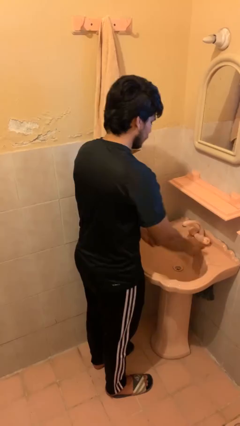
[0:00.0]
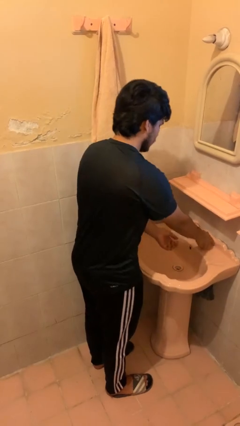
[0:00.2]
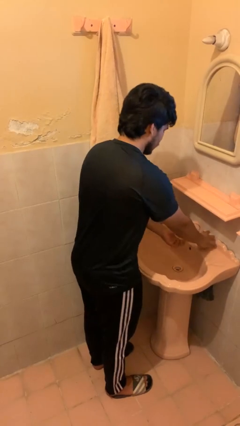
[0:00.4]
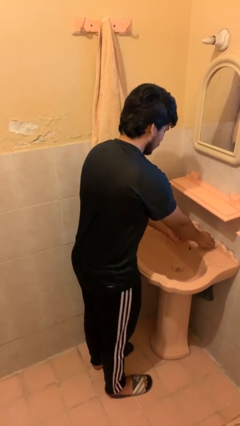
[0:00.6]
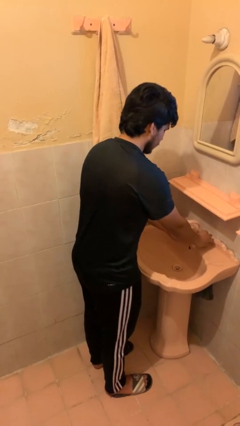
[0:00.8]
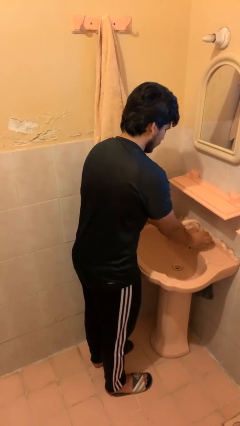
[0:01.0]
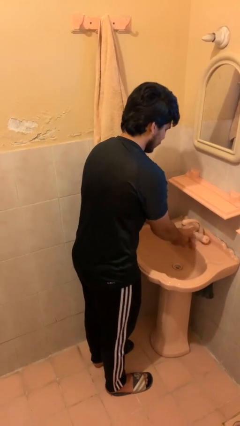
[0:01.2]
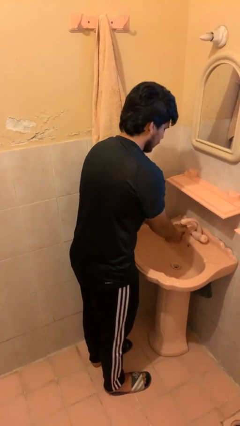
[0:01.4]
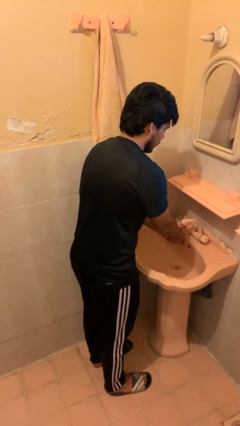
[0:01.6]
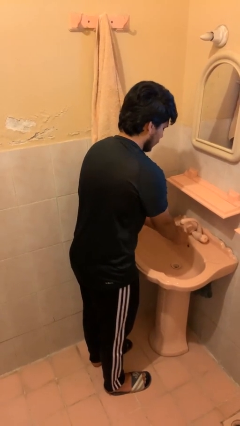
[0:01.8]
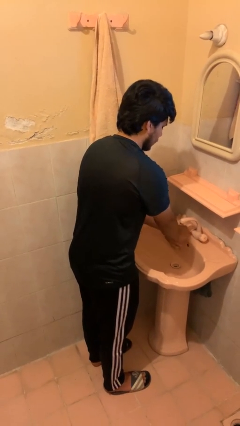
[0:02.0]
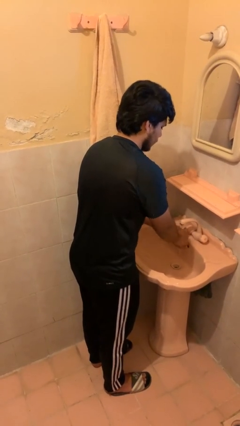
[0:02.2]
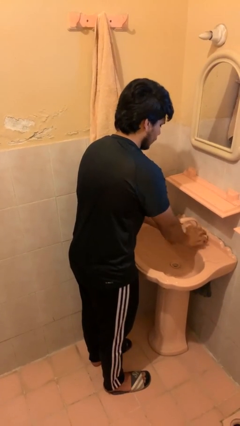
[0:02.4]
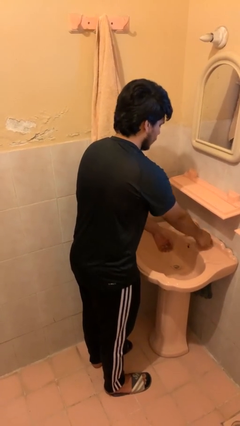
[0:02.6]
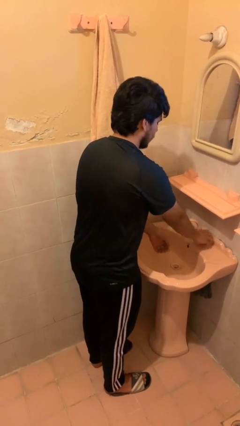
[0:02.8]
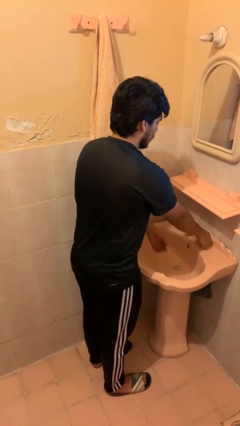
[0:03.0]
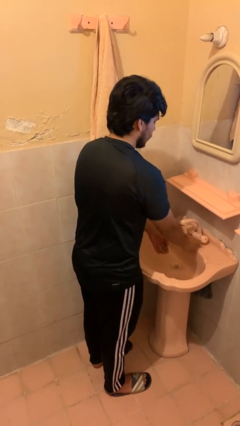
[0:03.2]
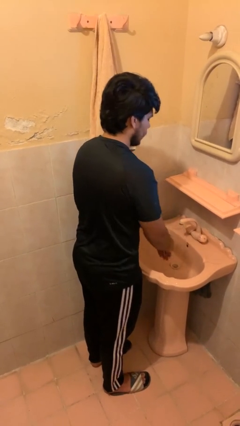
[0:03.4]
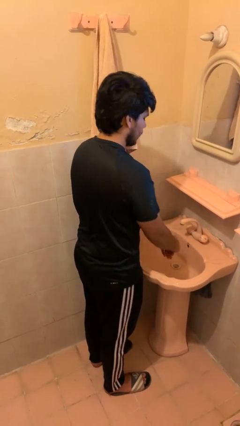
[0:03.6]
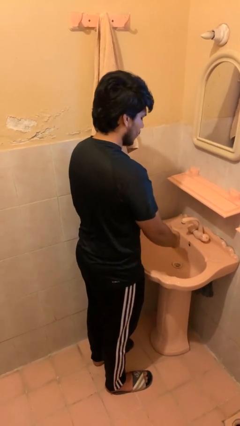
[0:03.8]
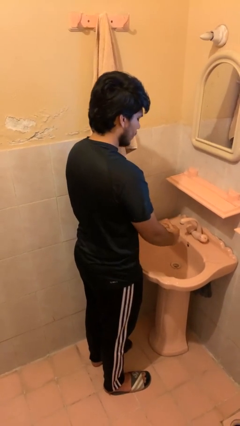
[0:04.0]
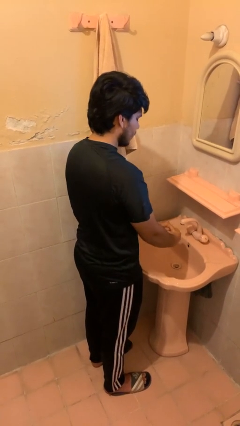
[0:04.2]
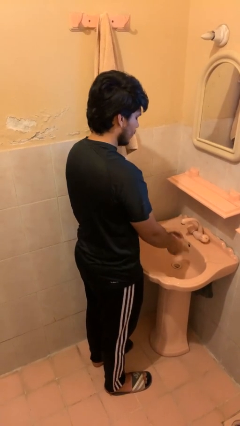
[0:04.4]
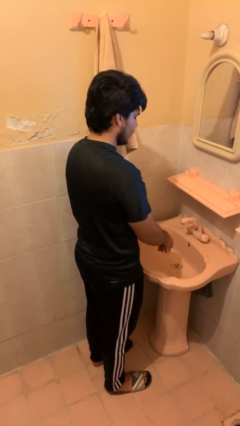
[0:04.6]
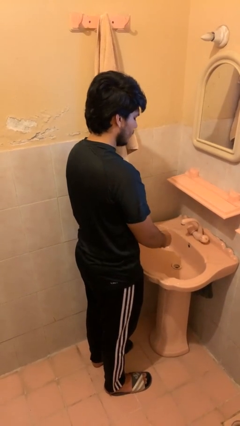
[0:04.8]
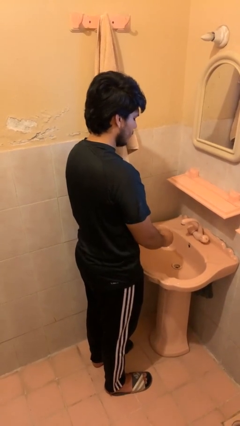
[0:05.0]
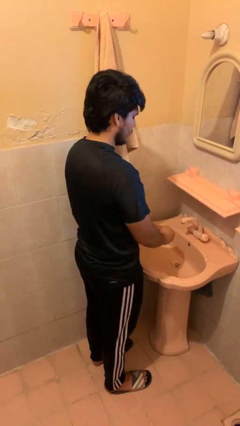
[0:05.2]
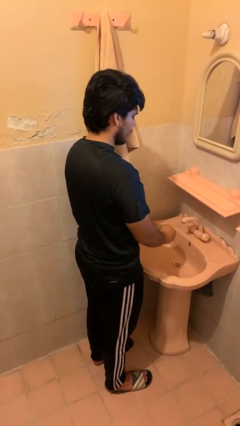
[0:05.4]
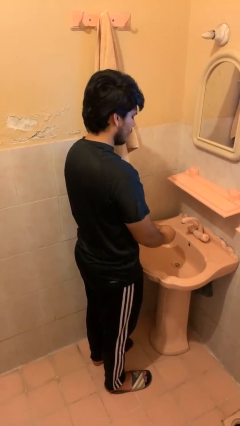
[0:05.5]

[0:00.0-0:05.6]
person washes hands

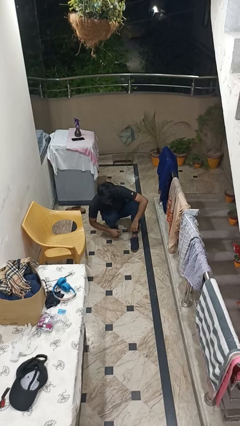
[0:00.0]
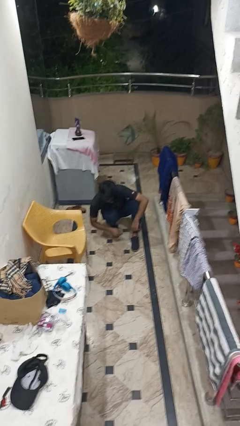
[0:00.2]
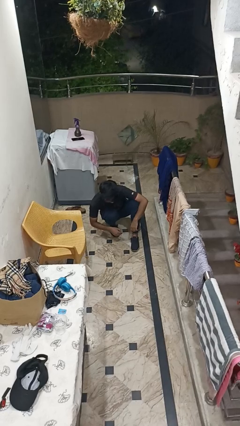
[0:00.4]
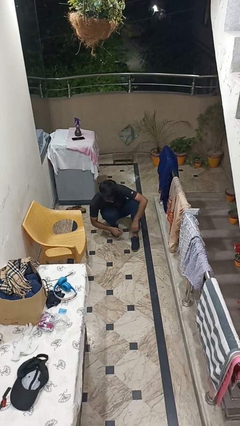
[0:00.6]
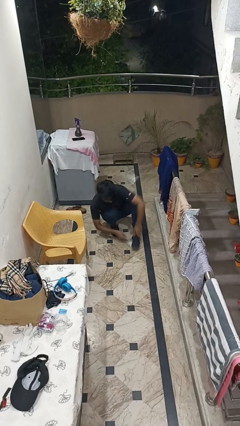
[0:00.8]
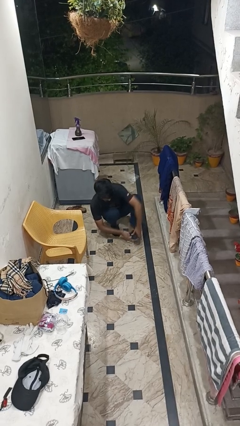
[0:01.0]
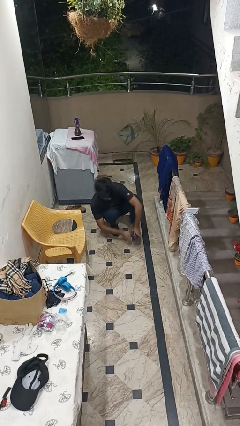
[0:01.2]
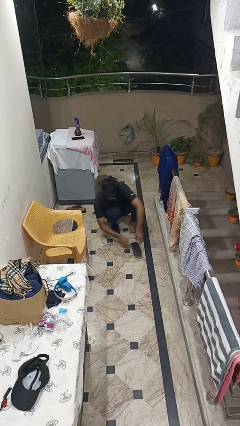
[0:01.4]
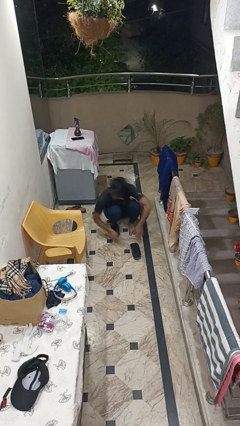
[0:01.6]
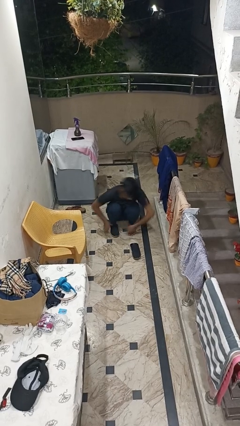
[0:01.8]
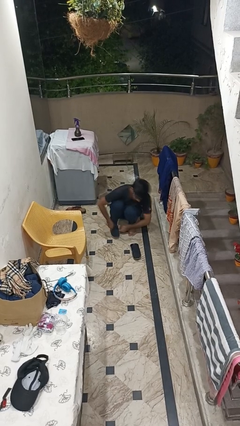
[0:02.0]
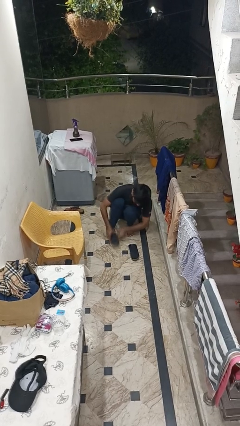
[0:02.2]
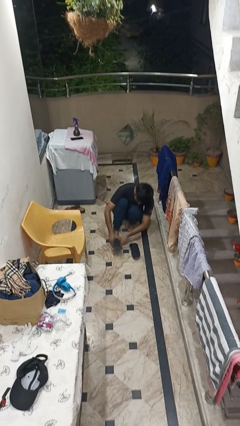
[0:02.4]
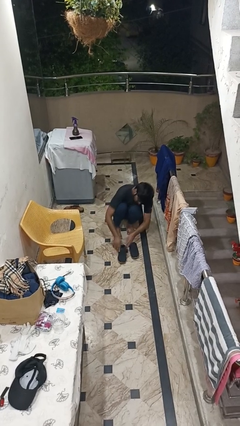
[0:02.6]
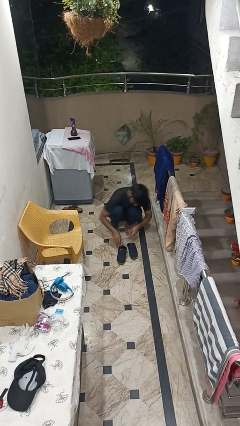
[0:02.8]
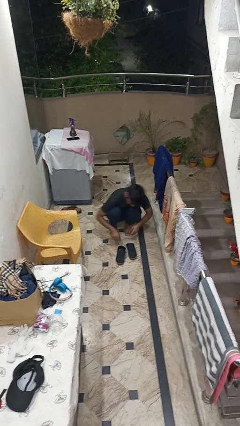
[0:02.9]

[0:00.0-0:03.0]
person takes off shoes

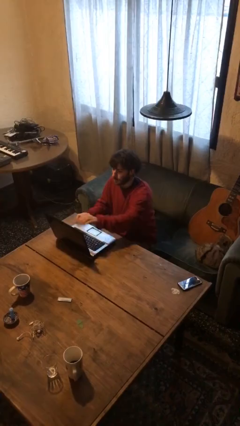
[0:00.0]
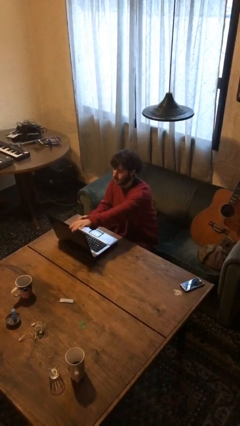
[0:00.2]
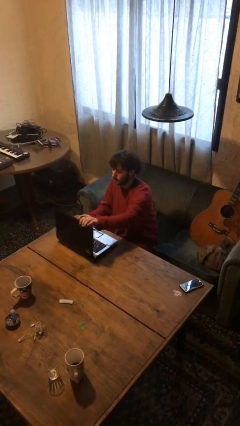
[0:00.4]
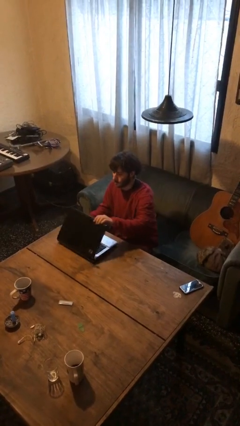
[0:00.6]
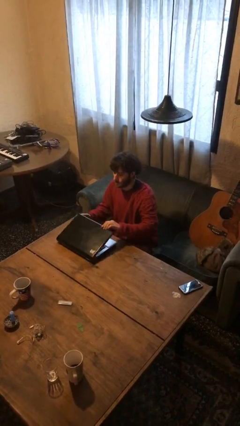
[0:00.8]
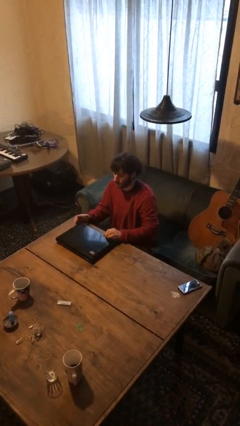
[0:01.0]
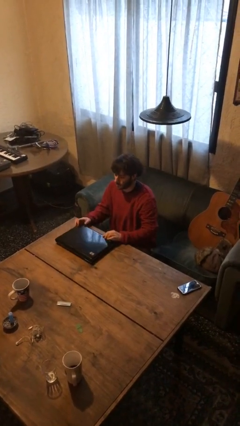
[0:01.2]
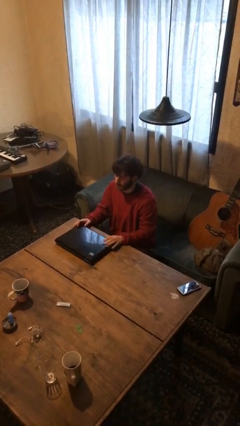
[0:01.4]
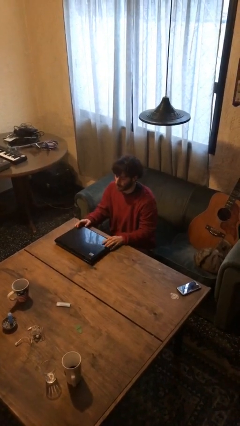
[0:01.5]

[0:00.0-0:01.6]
person closes laptop

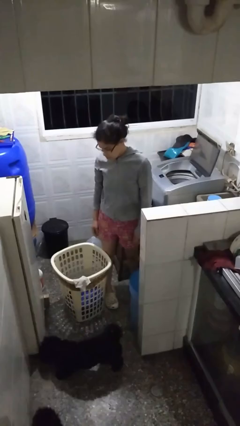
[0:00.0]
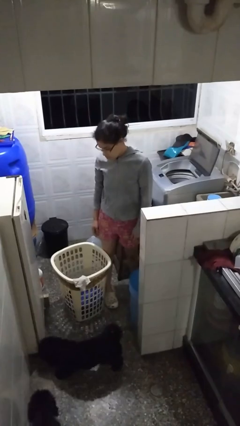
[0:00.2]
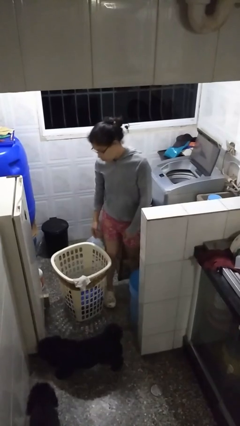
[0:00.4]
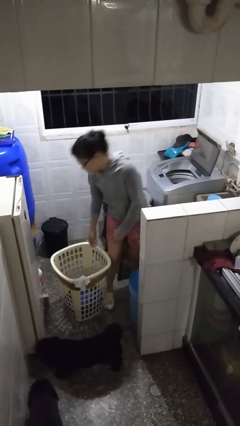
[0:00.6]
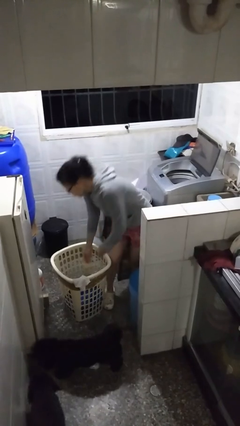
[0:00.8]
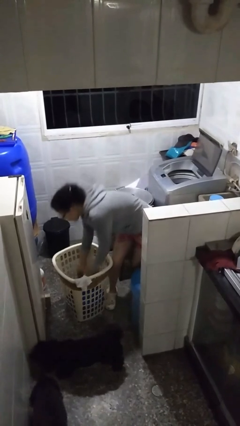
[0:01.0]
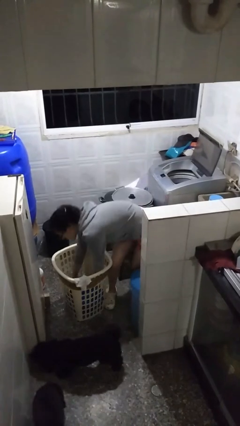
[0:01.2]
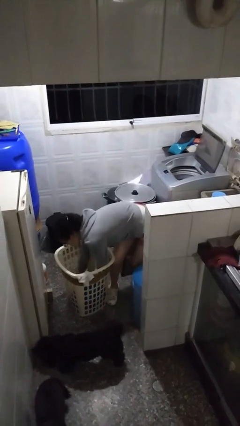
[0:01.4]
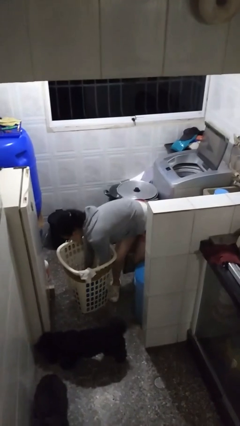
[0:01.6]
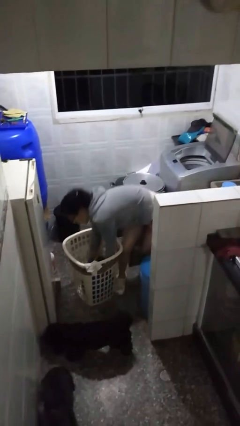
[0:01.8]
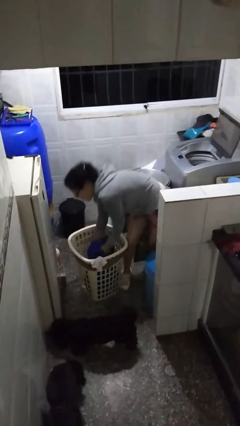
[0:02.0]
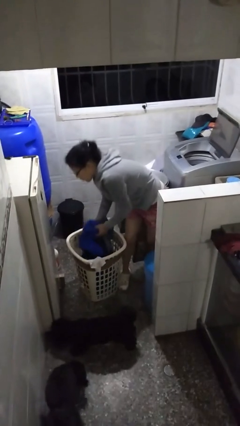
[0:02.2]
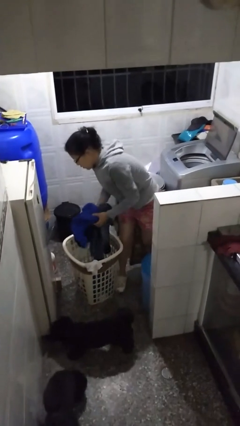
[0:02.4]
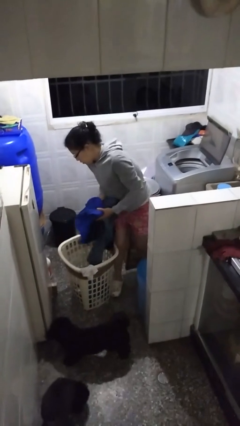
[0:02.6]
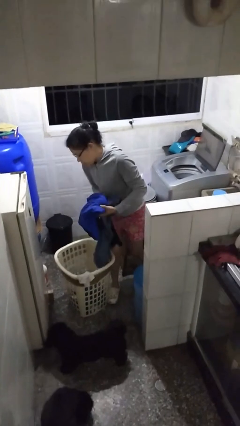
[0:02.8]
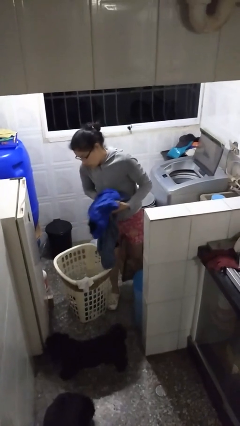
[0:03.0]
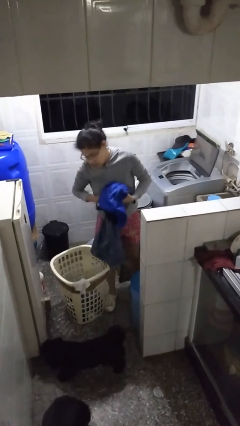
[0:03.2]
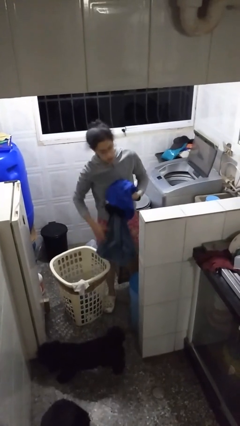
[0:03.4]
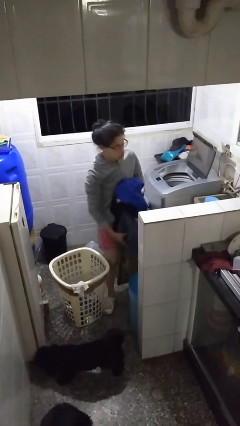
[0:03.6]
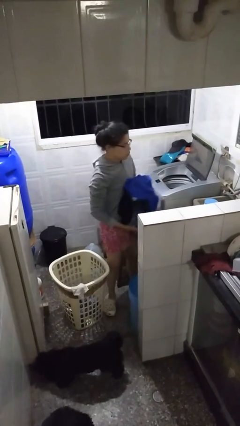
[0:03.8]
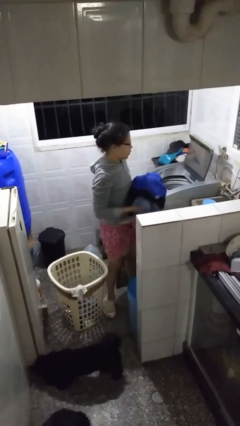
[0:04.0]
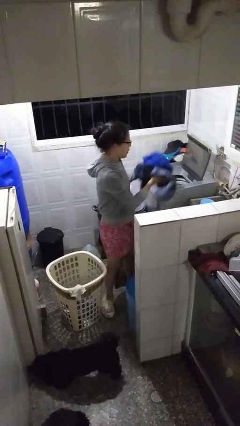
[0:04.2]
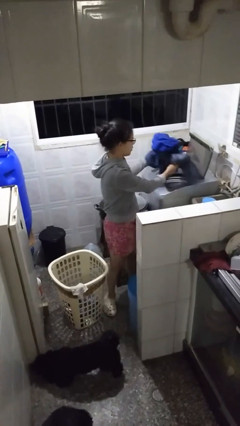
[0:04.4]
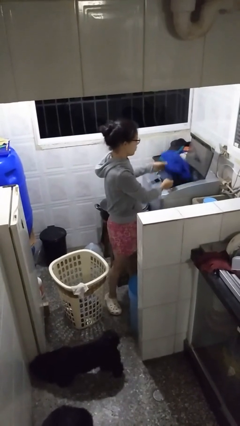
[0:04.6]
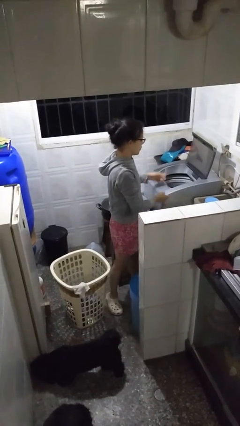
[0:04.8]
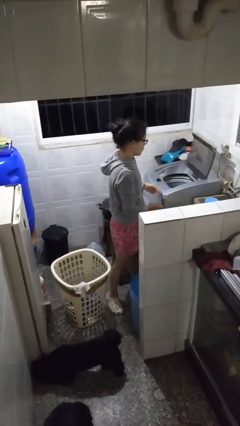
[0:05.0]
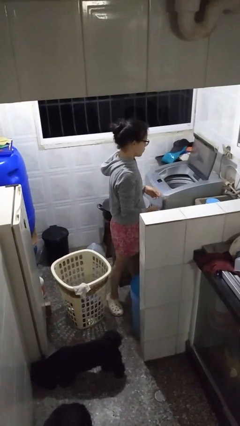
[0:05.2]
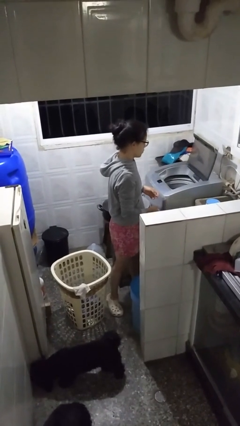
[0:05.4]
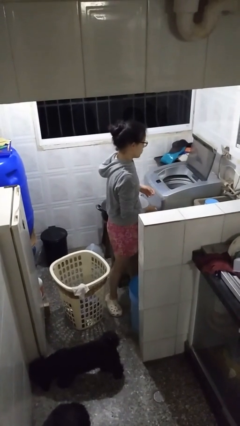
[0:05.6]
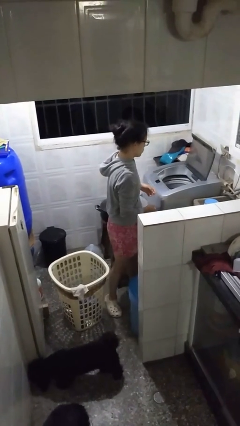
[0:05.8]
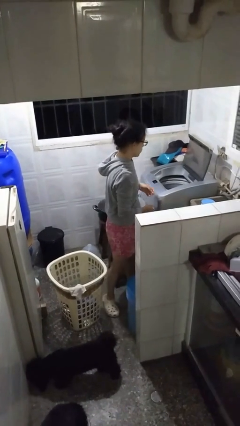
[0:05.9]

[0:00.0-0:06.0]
person loads clotheswasher

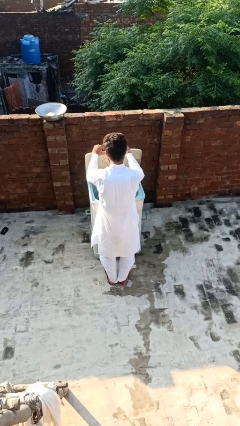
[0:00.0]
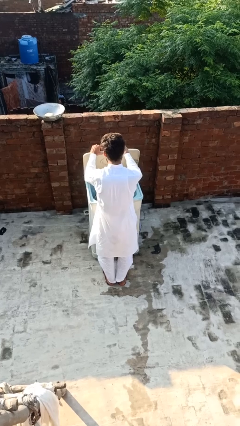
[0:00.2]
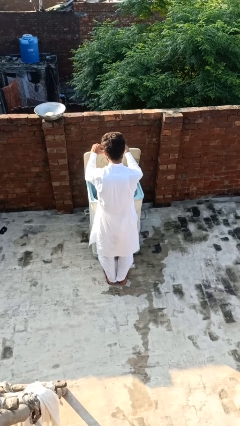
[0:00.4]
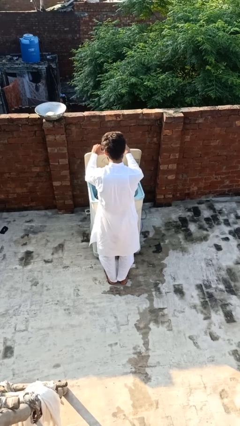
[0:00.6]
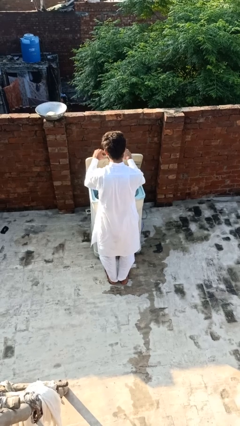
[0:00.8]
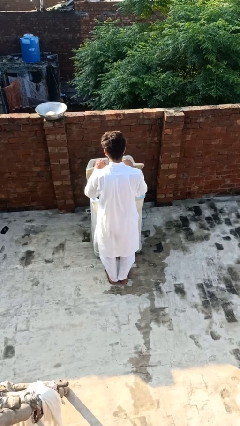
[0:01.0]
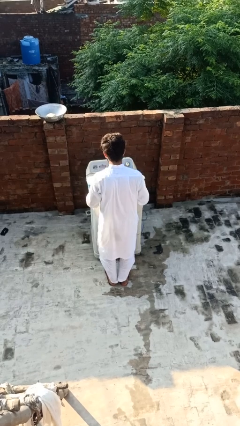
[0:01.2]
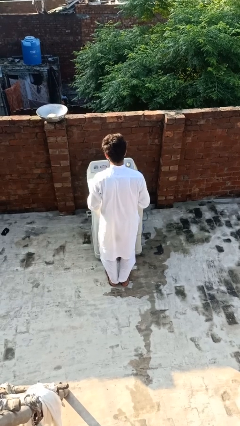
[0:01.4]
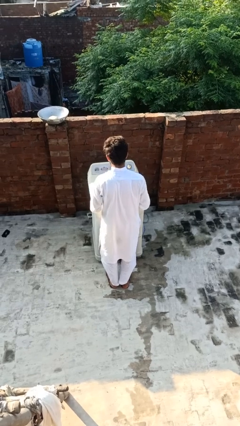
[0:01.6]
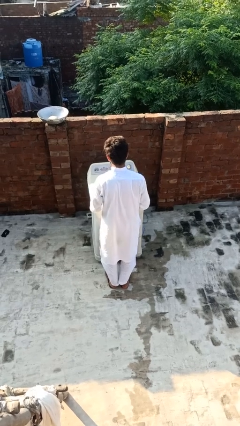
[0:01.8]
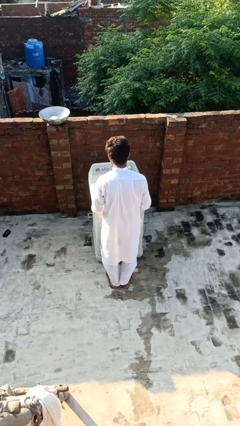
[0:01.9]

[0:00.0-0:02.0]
person closes clothes washer

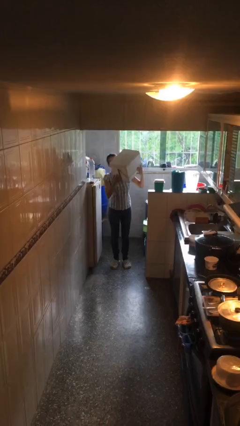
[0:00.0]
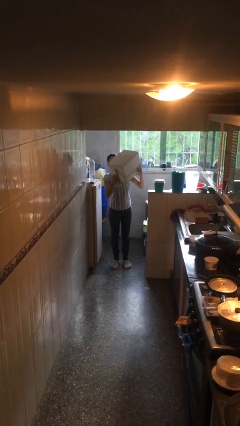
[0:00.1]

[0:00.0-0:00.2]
person puts down object on floor
